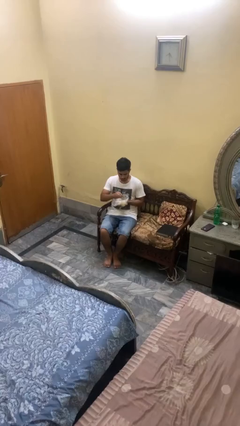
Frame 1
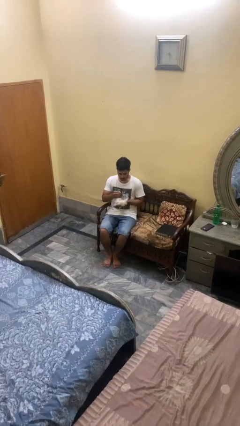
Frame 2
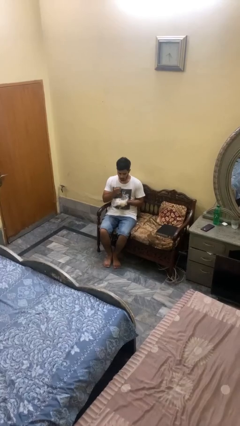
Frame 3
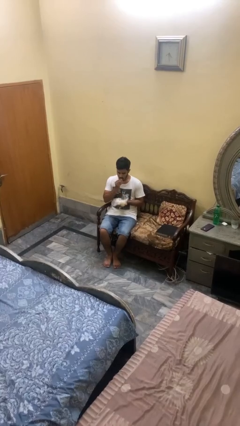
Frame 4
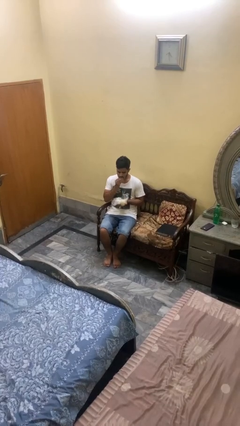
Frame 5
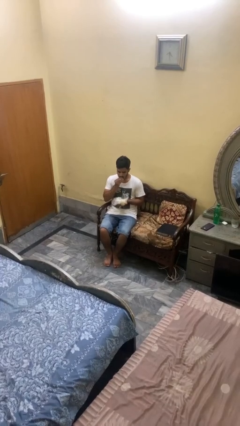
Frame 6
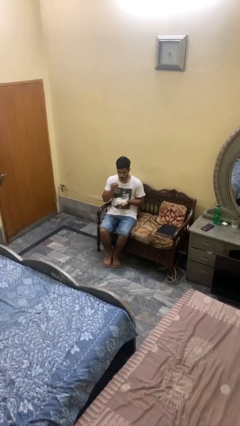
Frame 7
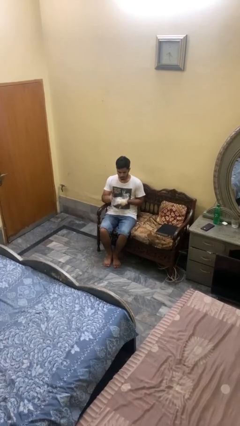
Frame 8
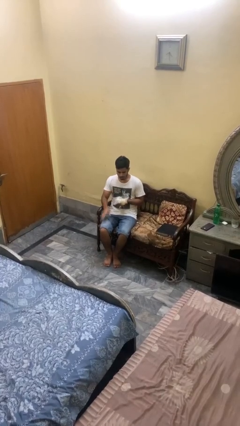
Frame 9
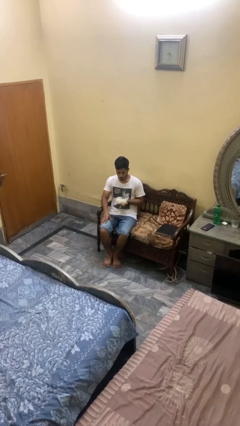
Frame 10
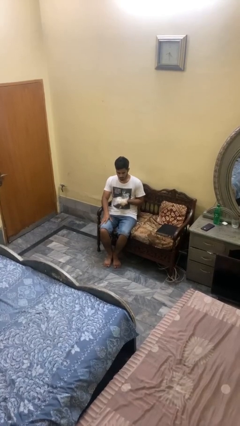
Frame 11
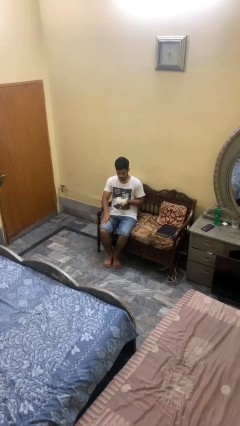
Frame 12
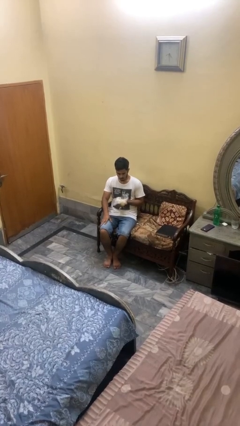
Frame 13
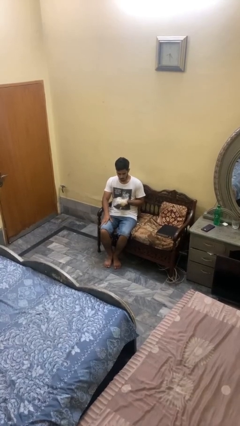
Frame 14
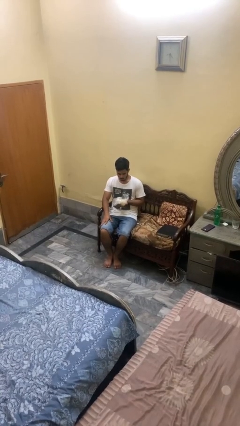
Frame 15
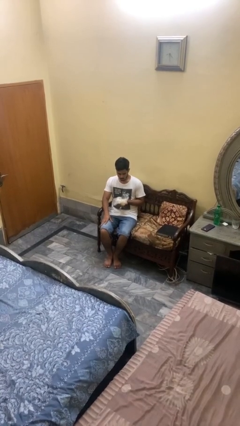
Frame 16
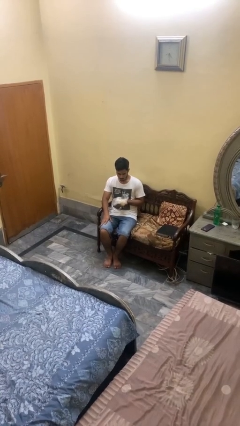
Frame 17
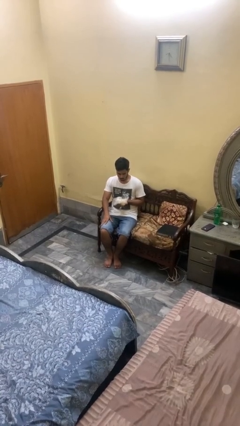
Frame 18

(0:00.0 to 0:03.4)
person eats snack from bag

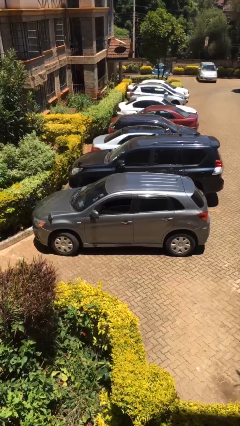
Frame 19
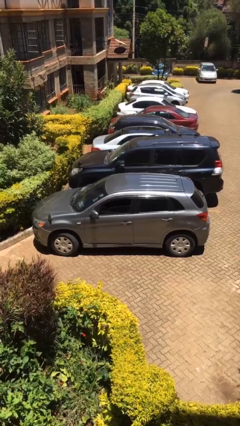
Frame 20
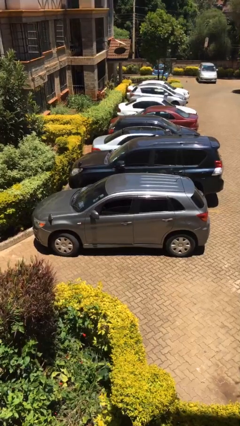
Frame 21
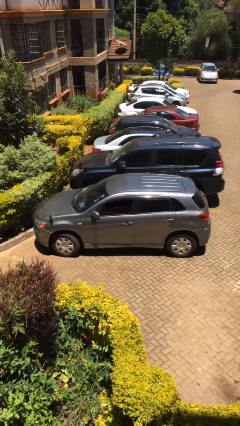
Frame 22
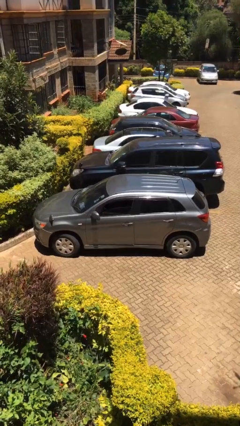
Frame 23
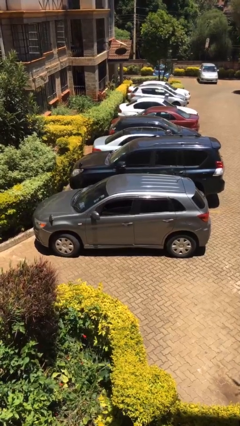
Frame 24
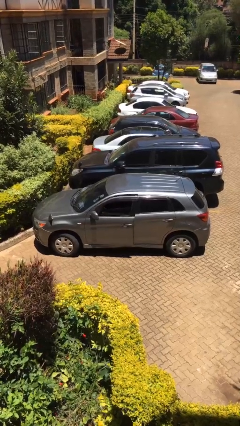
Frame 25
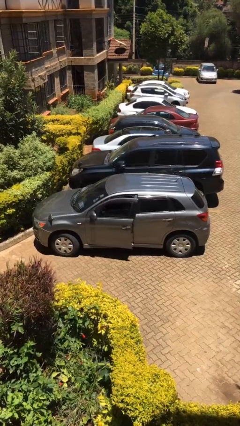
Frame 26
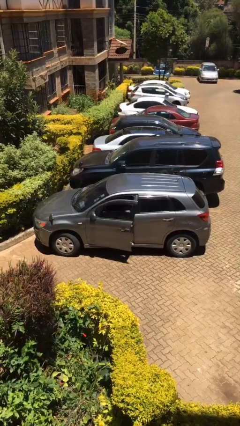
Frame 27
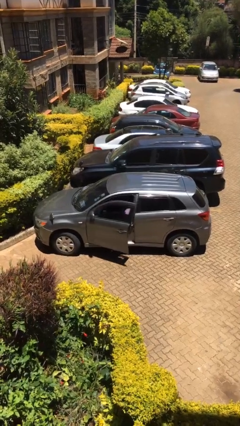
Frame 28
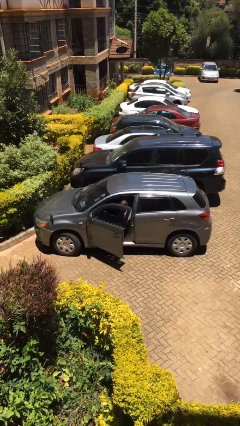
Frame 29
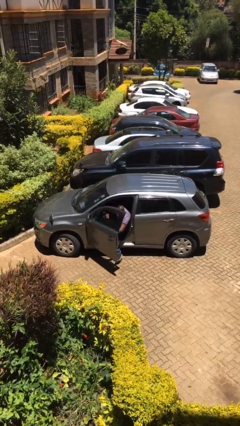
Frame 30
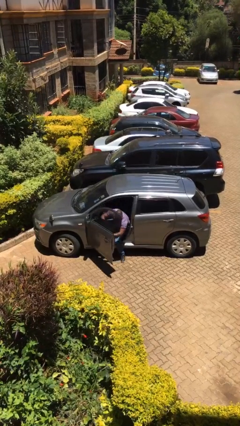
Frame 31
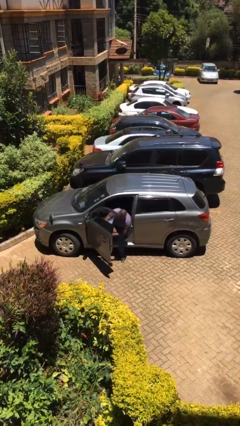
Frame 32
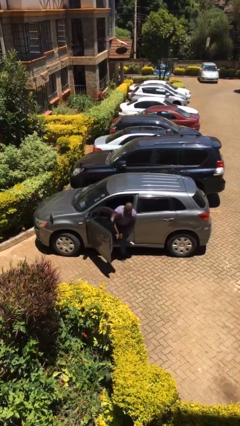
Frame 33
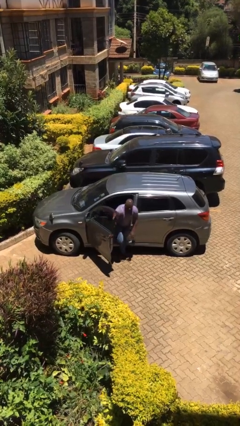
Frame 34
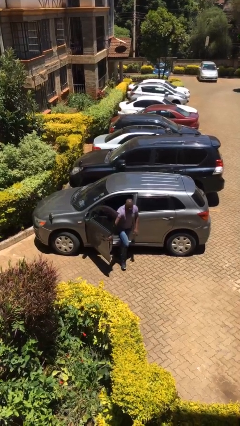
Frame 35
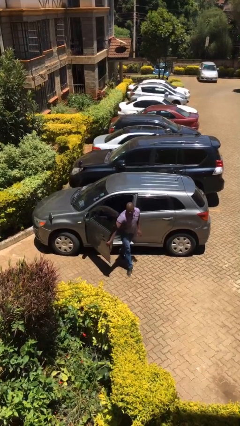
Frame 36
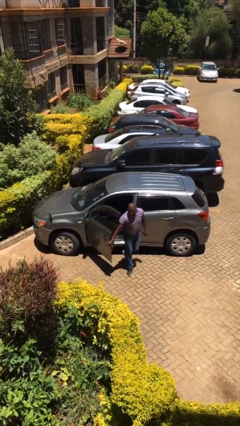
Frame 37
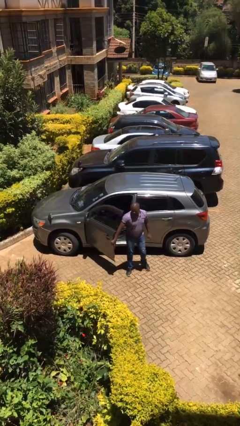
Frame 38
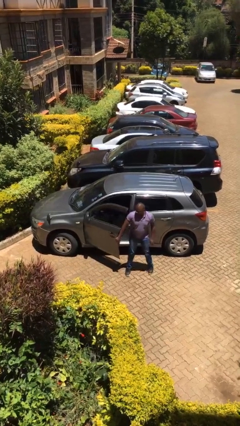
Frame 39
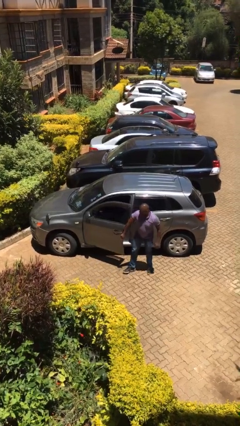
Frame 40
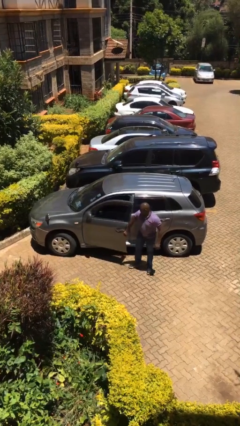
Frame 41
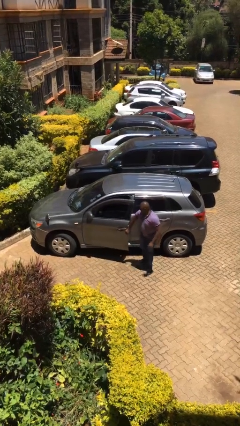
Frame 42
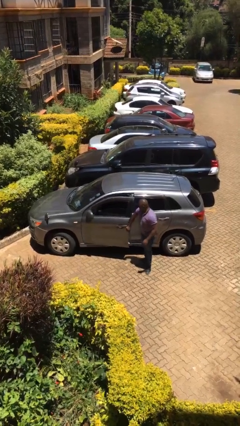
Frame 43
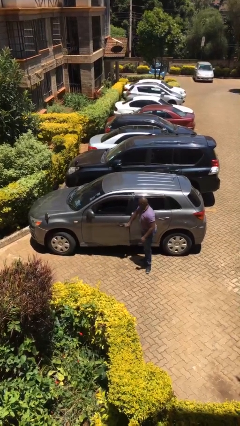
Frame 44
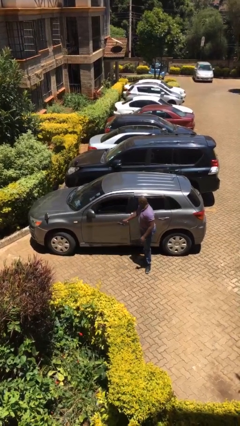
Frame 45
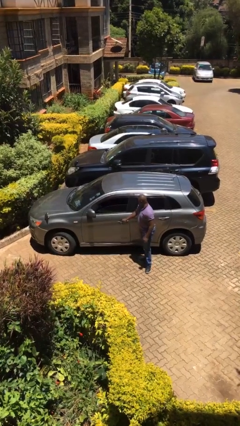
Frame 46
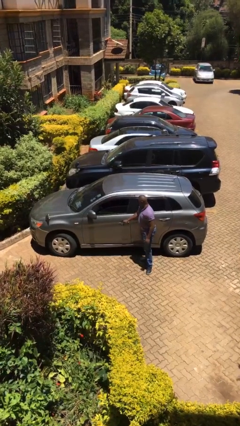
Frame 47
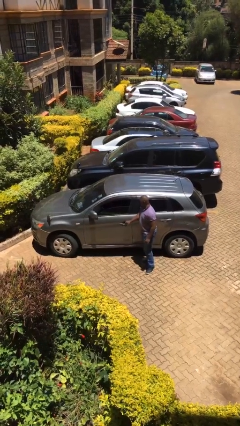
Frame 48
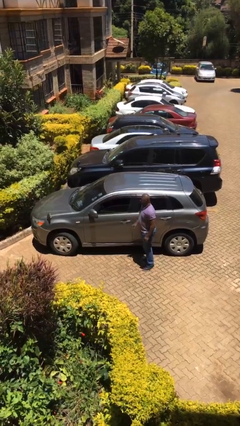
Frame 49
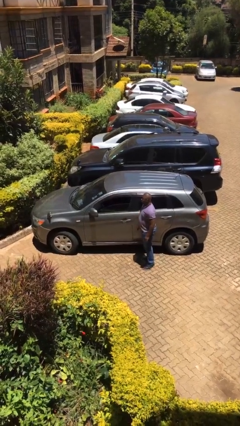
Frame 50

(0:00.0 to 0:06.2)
car drops off person

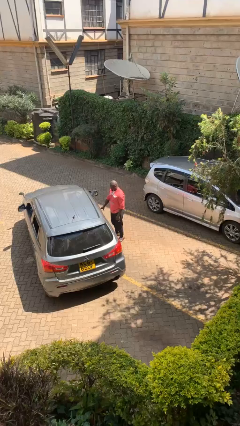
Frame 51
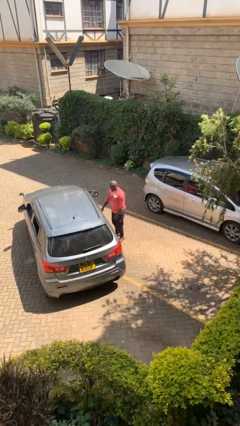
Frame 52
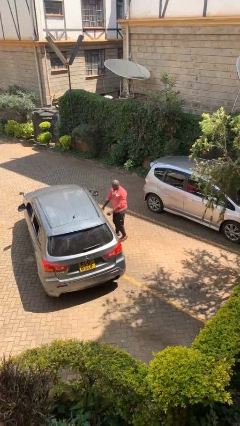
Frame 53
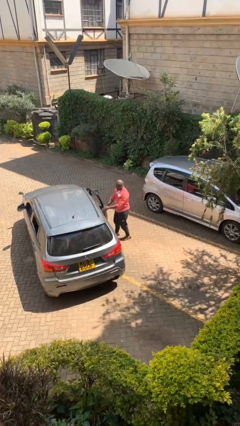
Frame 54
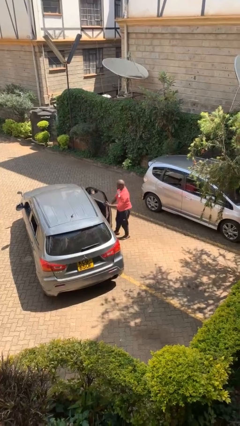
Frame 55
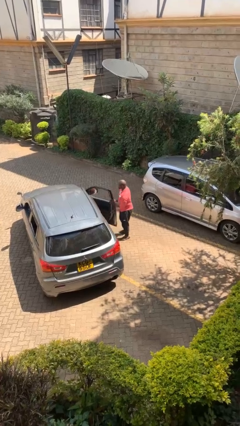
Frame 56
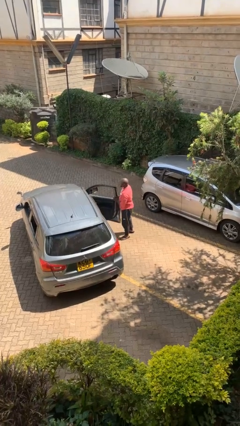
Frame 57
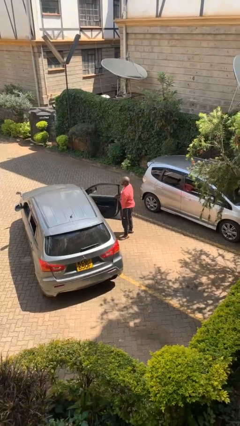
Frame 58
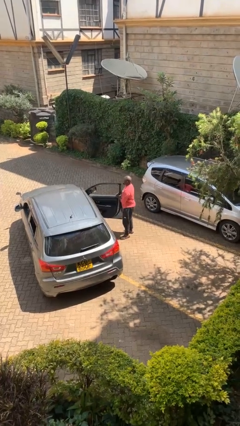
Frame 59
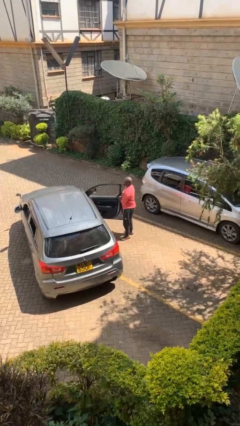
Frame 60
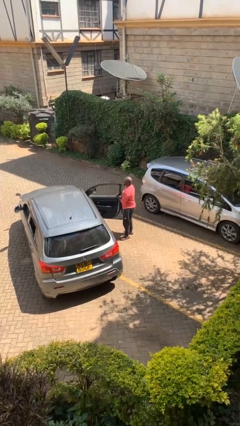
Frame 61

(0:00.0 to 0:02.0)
person opens car door

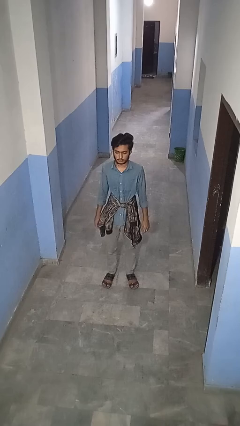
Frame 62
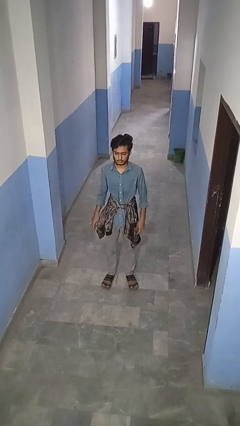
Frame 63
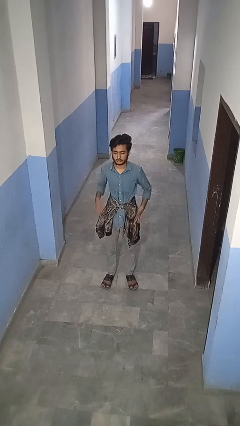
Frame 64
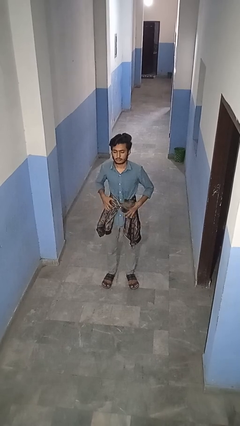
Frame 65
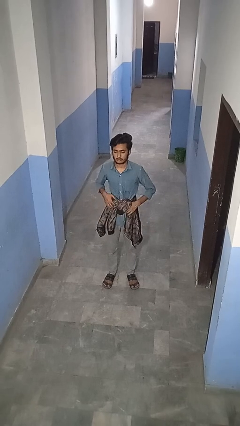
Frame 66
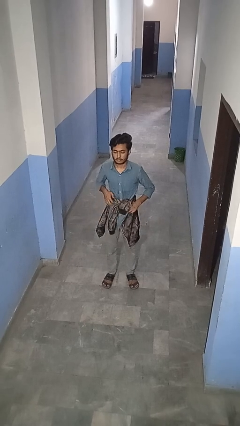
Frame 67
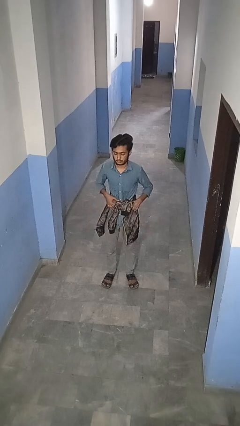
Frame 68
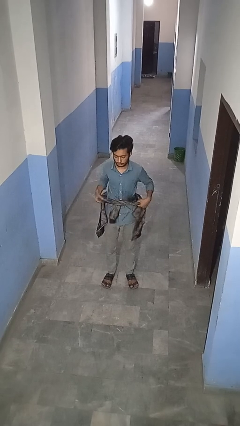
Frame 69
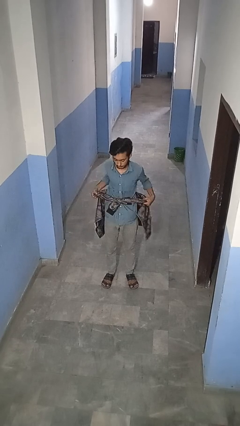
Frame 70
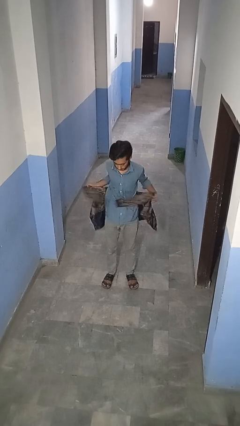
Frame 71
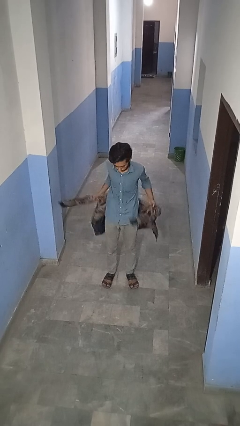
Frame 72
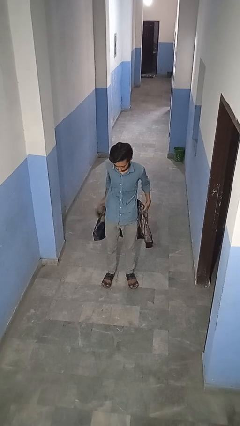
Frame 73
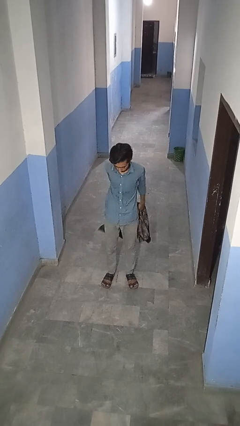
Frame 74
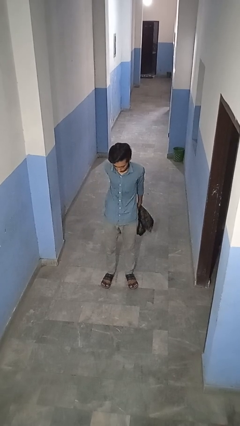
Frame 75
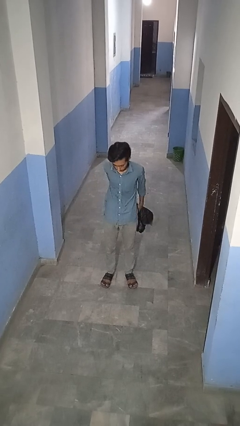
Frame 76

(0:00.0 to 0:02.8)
person unties jacket around waist

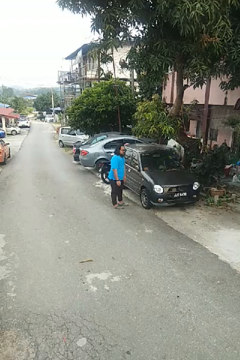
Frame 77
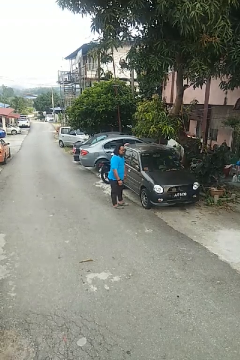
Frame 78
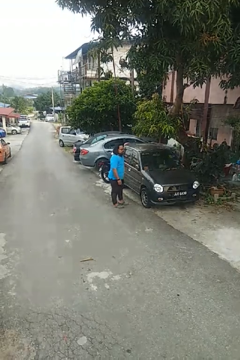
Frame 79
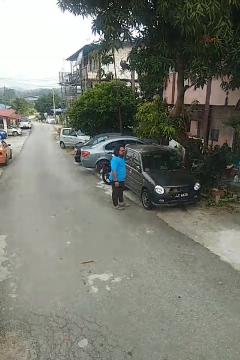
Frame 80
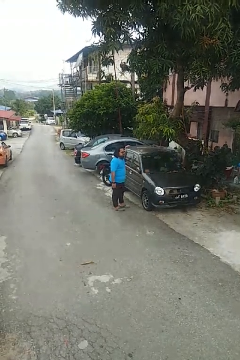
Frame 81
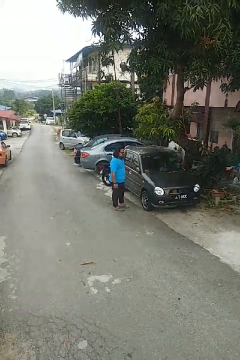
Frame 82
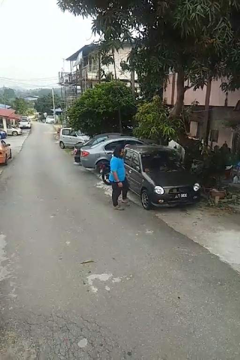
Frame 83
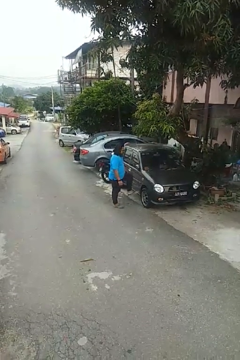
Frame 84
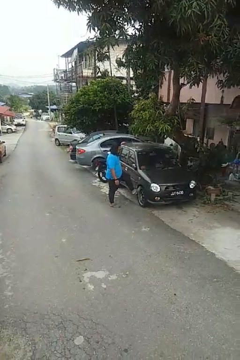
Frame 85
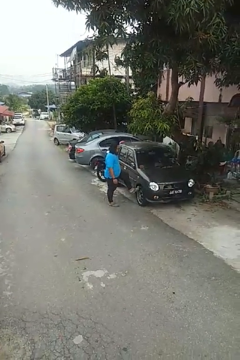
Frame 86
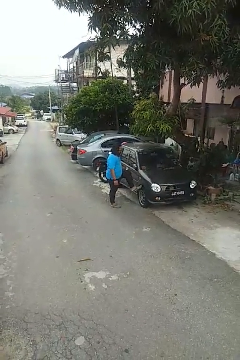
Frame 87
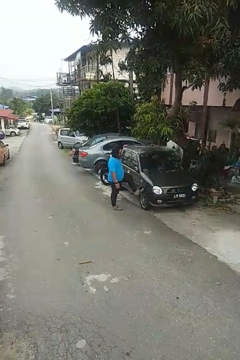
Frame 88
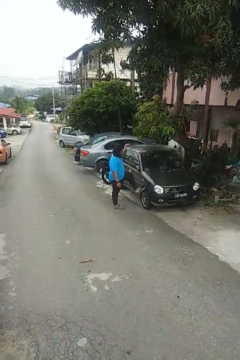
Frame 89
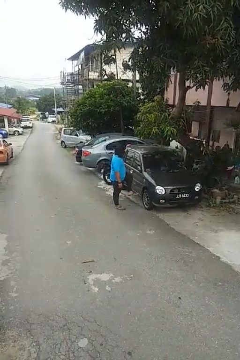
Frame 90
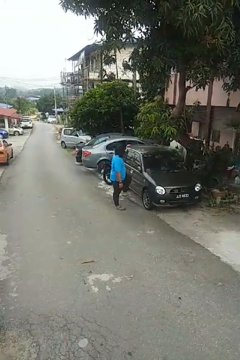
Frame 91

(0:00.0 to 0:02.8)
person kicks car tires

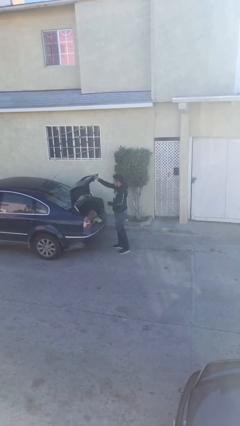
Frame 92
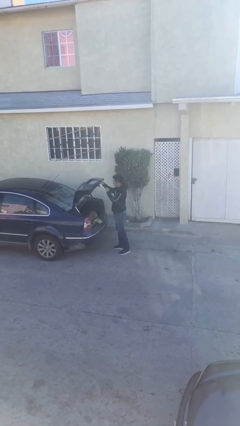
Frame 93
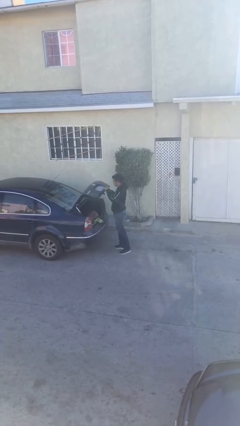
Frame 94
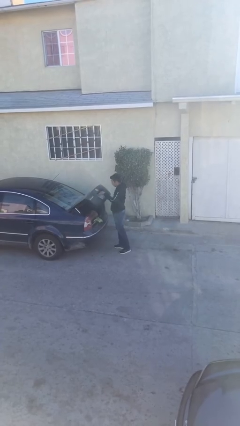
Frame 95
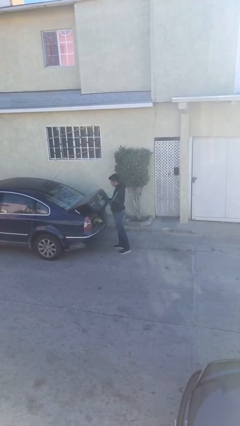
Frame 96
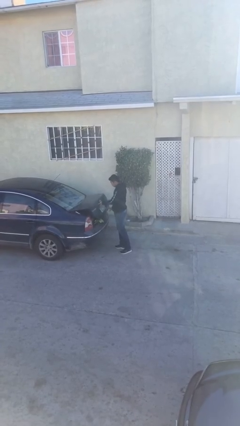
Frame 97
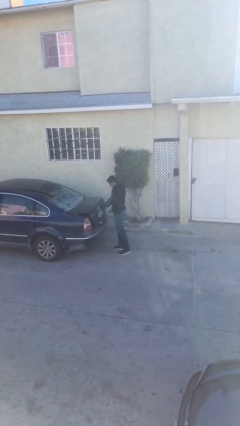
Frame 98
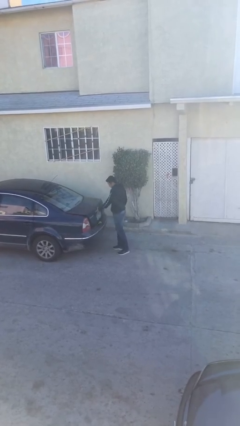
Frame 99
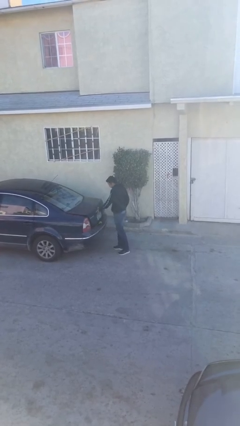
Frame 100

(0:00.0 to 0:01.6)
person closes car trunk
